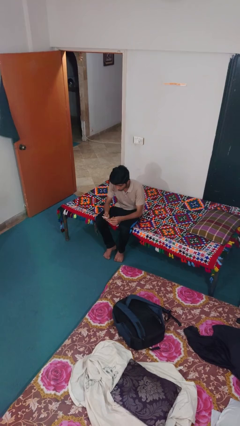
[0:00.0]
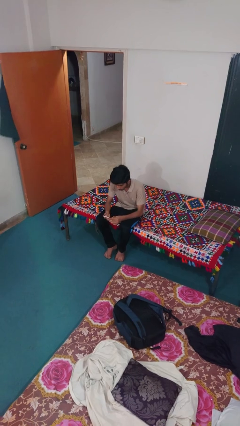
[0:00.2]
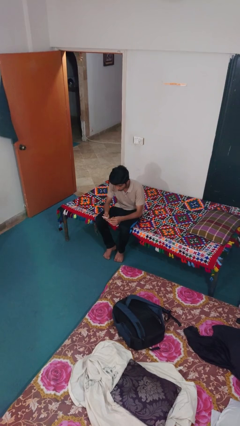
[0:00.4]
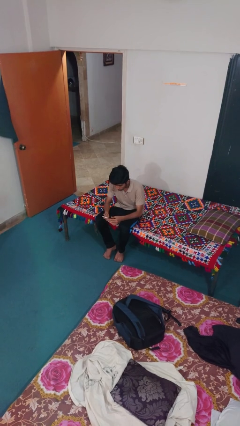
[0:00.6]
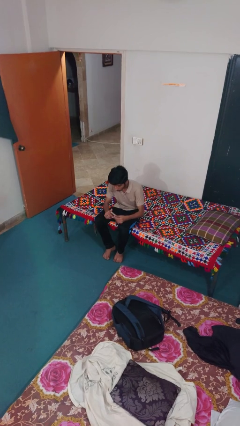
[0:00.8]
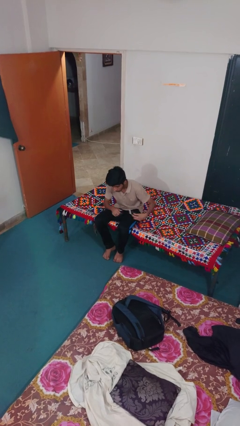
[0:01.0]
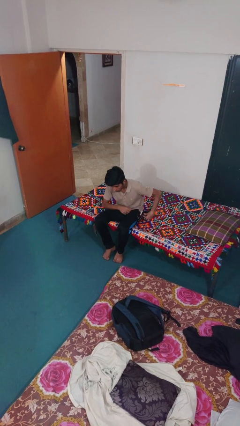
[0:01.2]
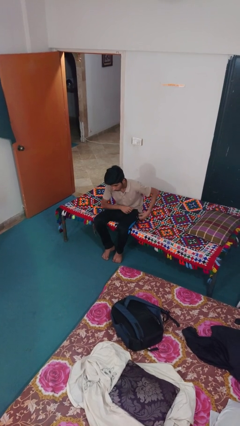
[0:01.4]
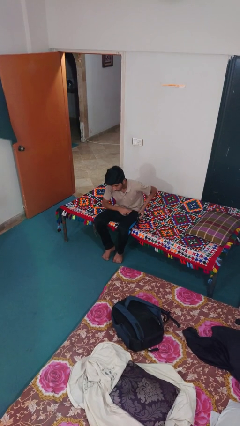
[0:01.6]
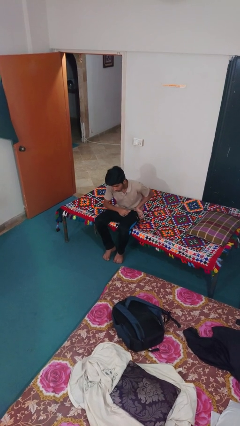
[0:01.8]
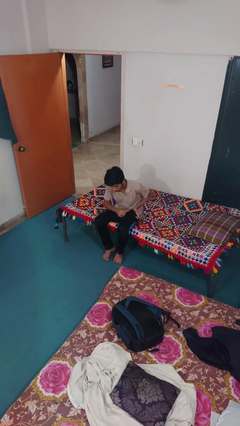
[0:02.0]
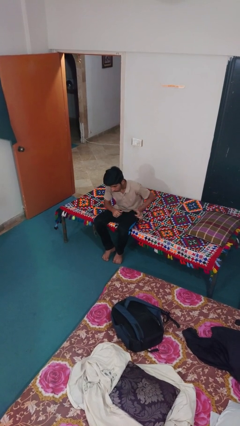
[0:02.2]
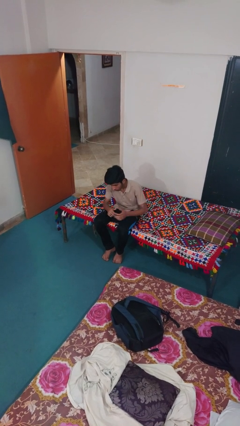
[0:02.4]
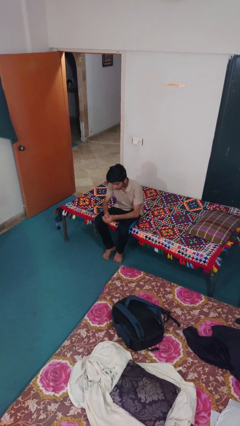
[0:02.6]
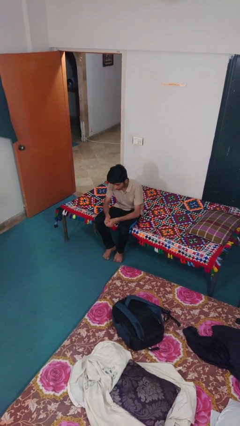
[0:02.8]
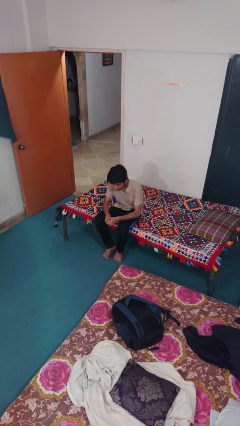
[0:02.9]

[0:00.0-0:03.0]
person puts phone into pocket

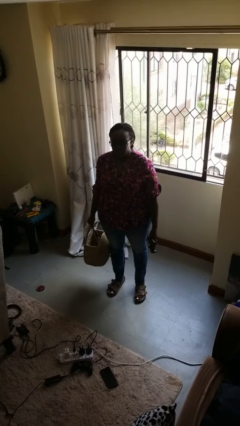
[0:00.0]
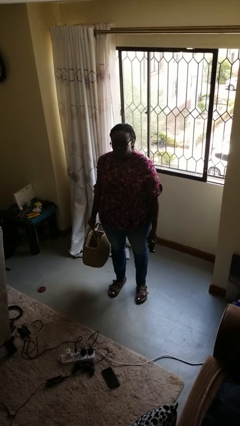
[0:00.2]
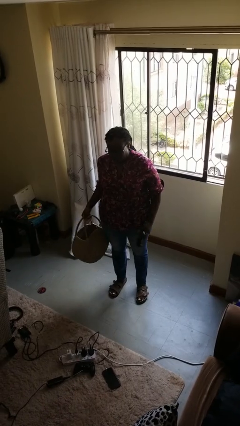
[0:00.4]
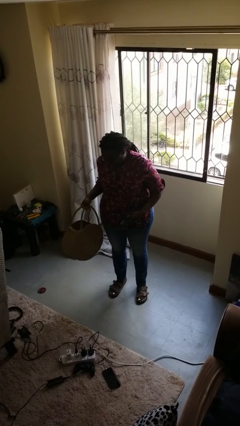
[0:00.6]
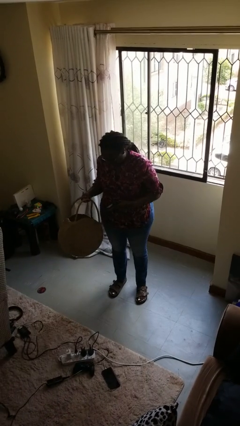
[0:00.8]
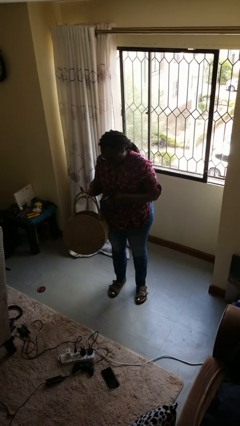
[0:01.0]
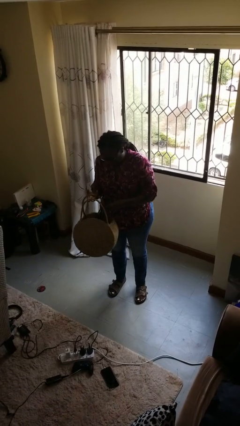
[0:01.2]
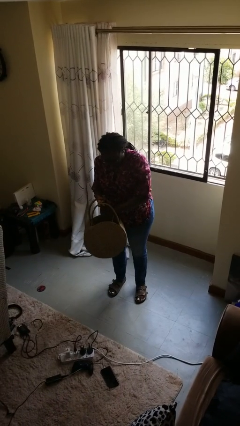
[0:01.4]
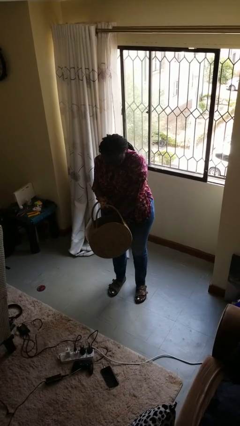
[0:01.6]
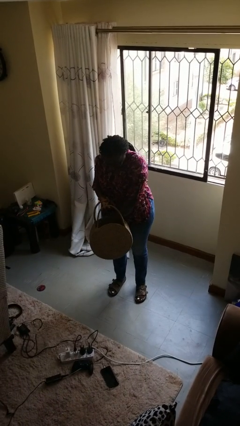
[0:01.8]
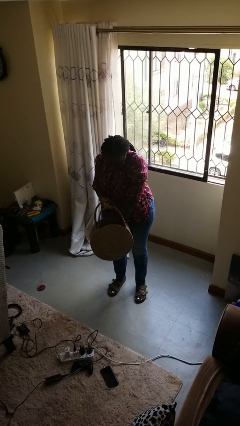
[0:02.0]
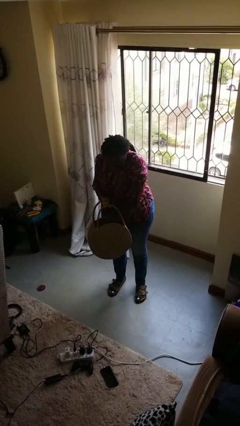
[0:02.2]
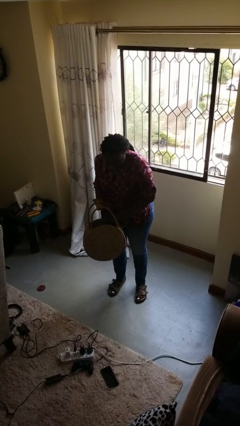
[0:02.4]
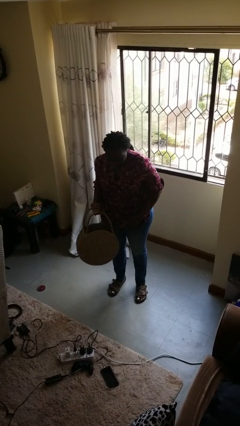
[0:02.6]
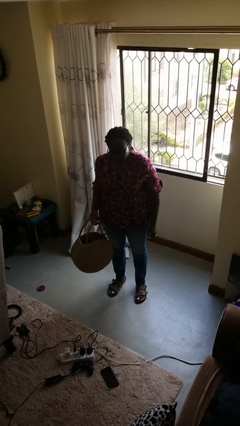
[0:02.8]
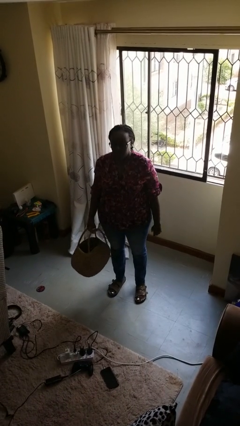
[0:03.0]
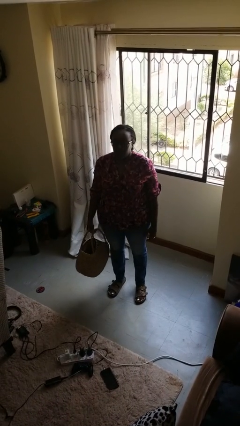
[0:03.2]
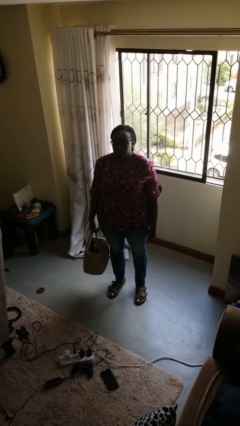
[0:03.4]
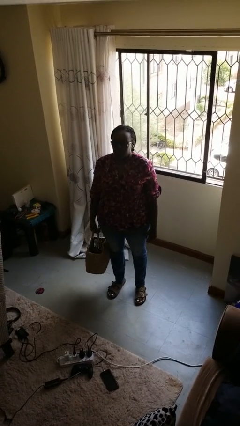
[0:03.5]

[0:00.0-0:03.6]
person puts object into basket

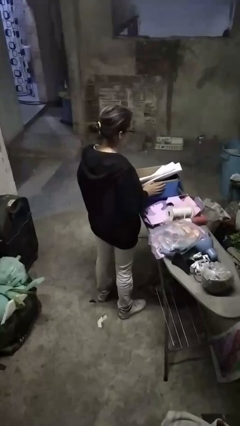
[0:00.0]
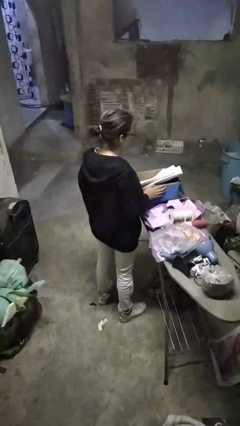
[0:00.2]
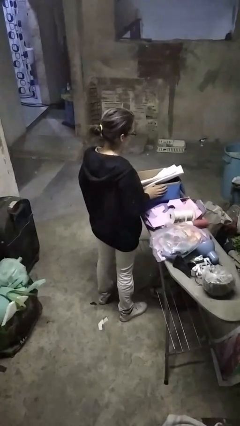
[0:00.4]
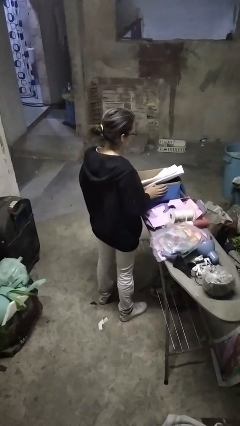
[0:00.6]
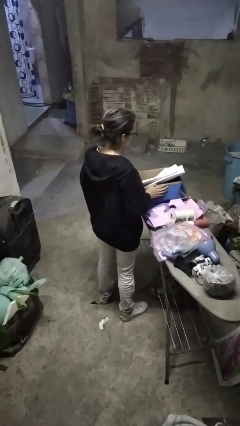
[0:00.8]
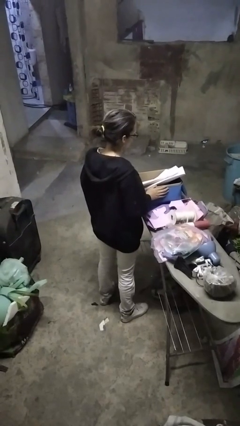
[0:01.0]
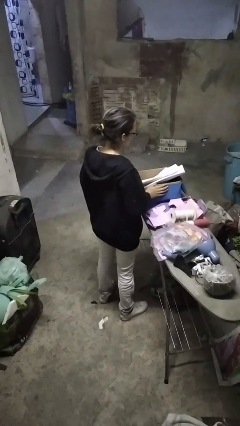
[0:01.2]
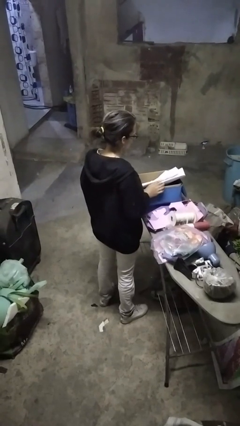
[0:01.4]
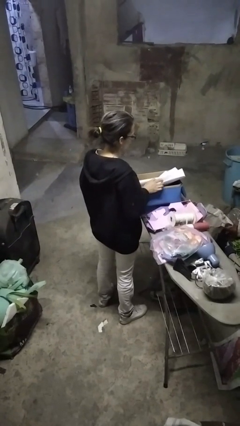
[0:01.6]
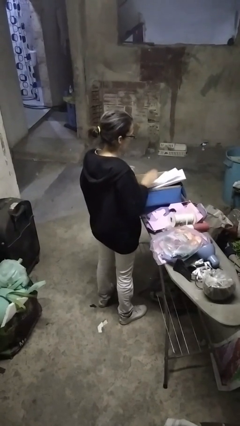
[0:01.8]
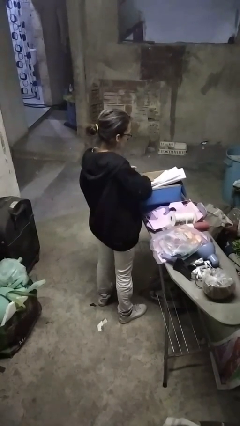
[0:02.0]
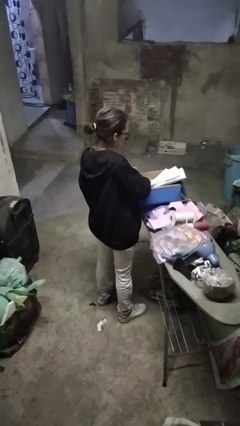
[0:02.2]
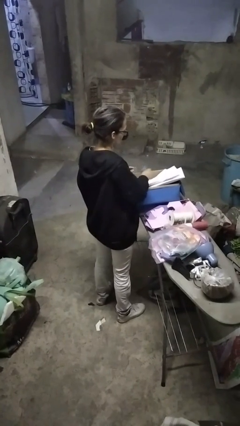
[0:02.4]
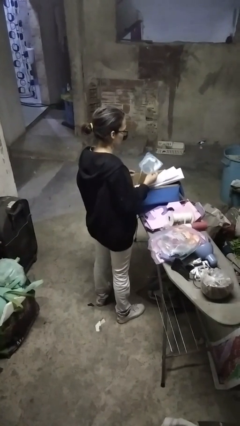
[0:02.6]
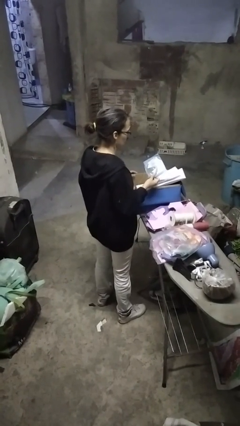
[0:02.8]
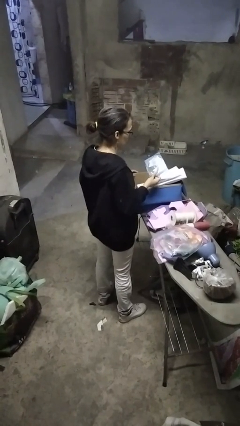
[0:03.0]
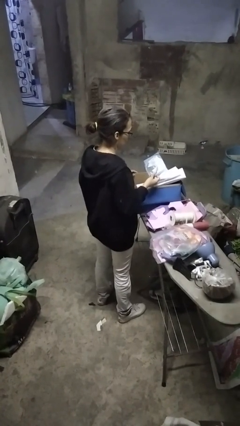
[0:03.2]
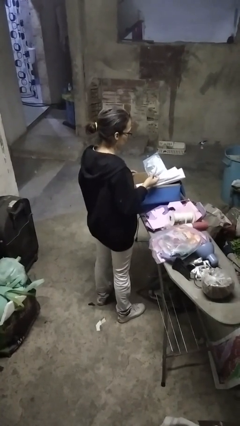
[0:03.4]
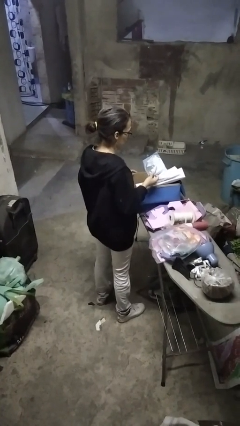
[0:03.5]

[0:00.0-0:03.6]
person takes object from box

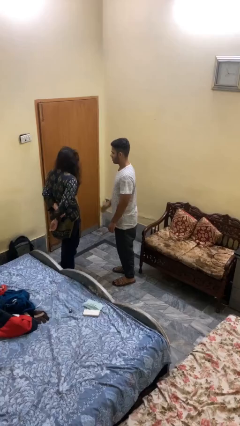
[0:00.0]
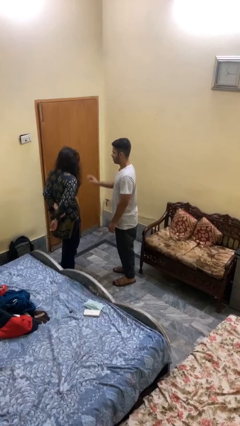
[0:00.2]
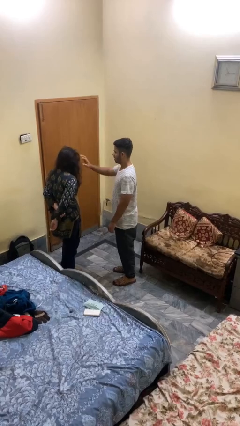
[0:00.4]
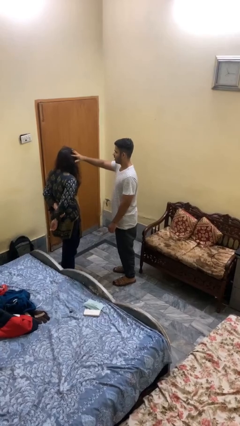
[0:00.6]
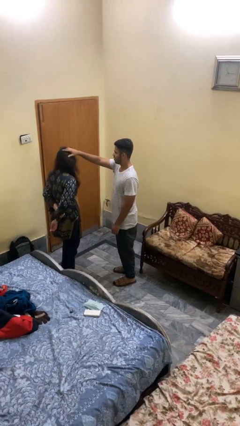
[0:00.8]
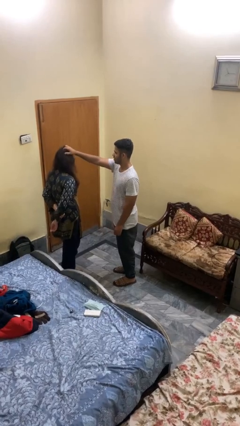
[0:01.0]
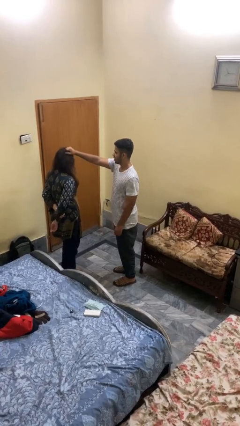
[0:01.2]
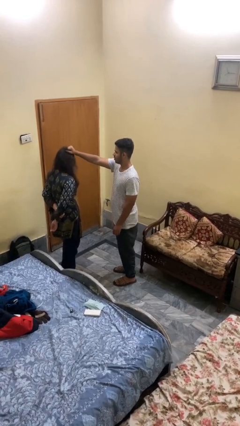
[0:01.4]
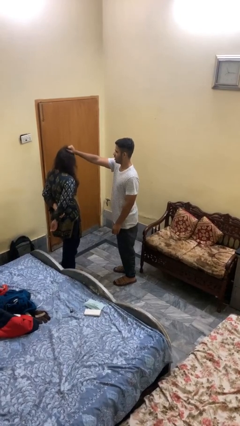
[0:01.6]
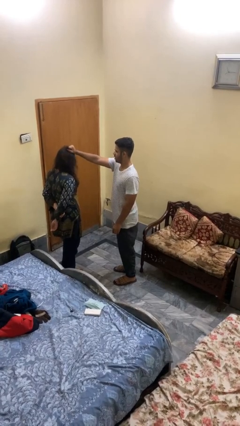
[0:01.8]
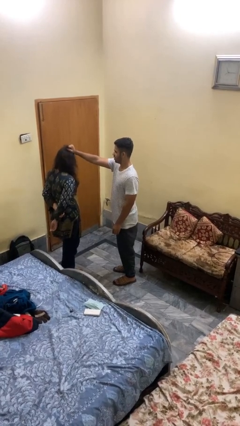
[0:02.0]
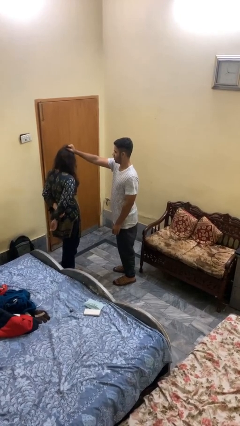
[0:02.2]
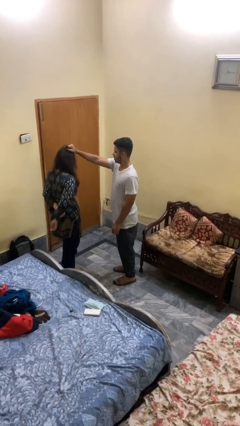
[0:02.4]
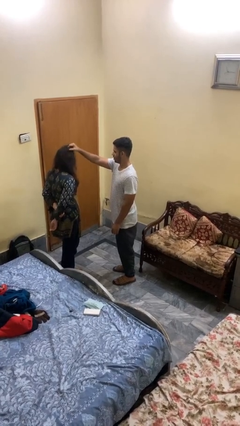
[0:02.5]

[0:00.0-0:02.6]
person grabs person by hair

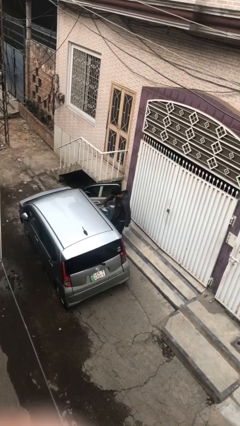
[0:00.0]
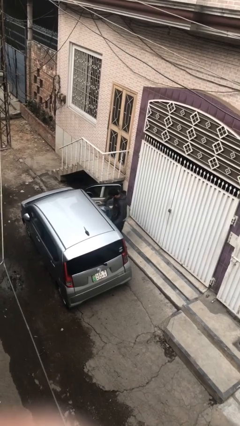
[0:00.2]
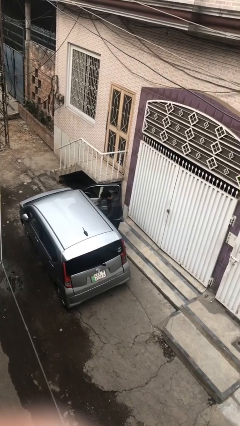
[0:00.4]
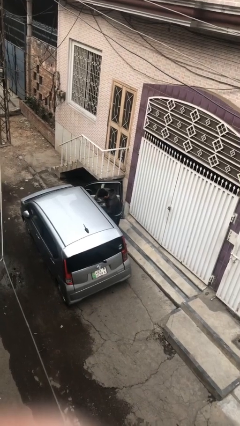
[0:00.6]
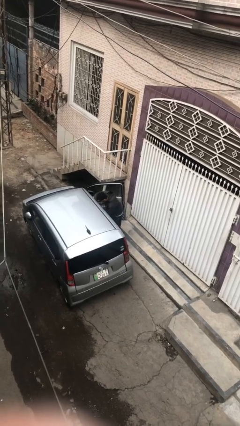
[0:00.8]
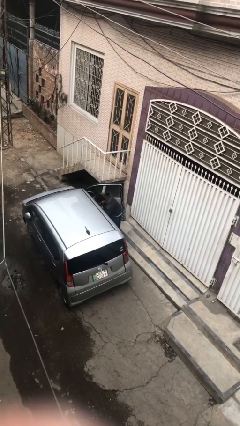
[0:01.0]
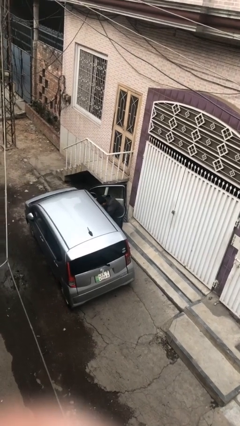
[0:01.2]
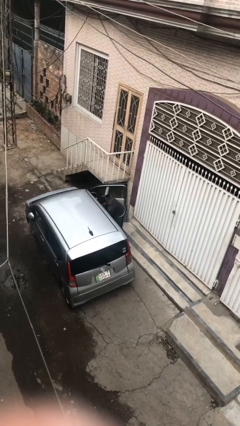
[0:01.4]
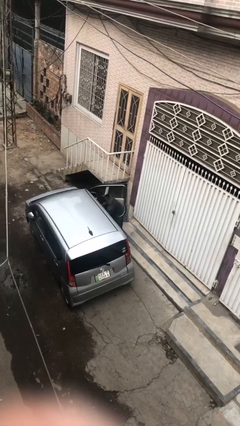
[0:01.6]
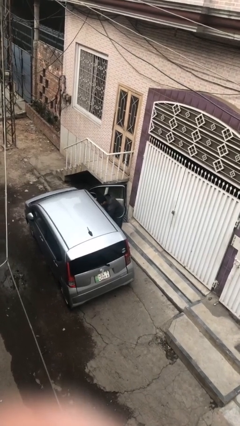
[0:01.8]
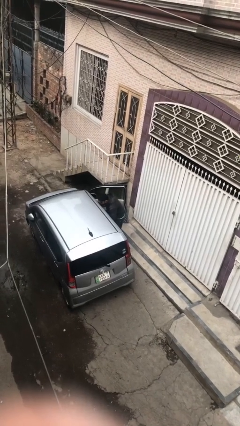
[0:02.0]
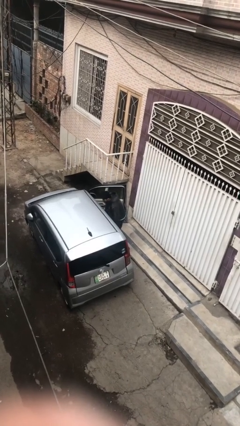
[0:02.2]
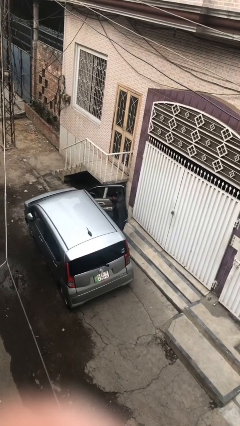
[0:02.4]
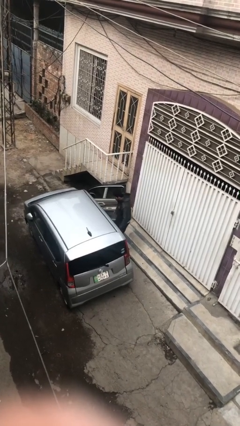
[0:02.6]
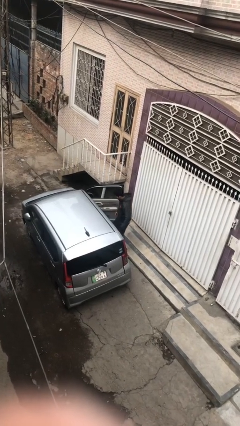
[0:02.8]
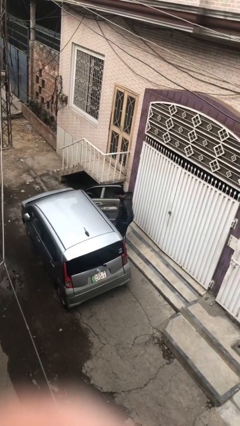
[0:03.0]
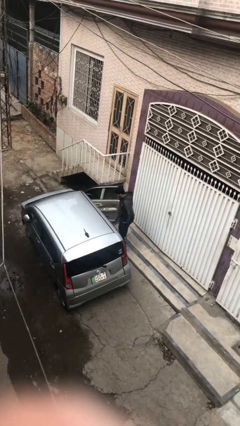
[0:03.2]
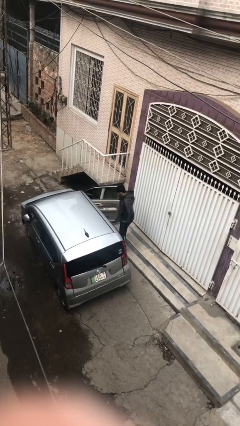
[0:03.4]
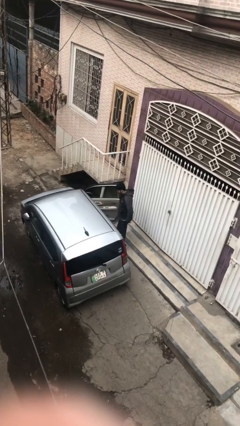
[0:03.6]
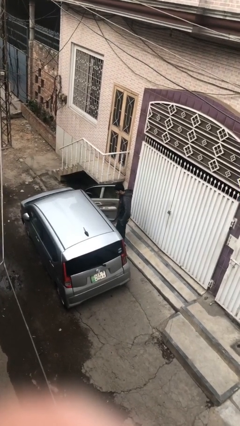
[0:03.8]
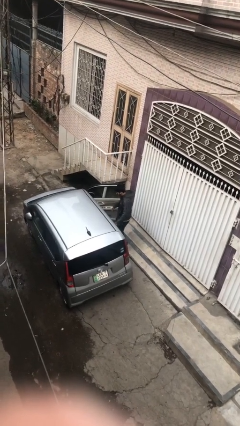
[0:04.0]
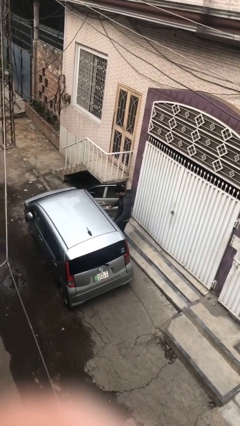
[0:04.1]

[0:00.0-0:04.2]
person loads car

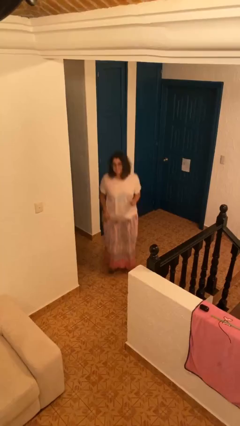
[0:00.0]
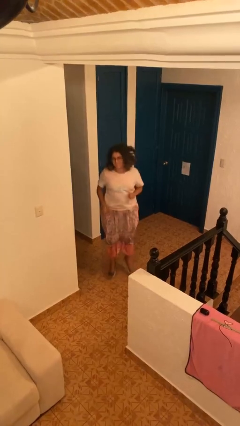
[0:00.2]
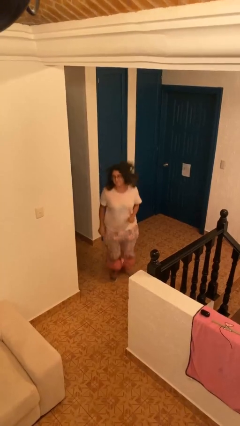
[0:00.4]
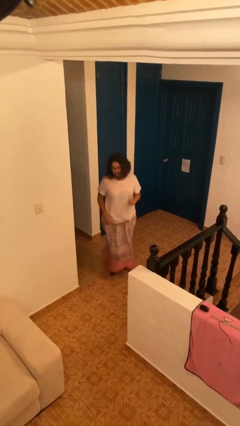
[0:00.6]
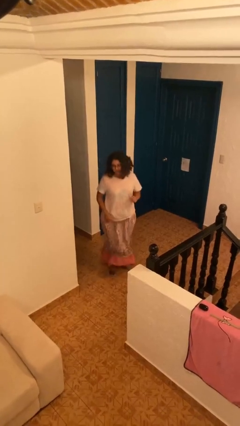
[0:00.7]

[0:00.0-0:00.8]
person jumps
